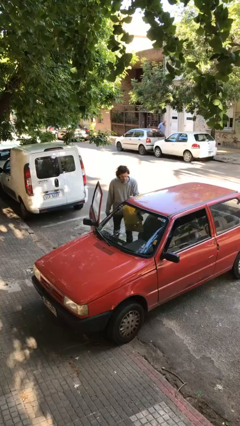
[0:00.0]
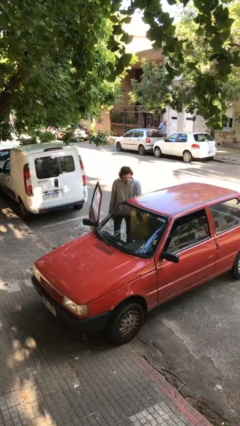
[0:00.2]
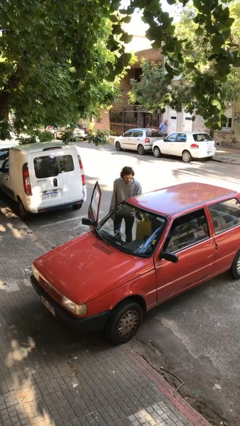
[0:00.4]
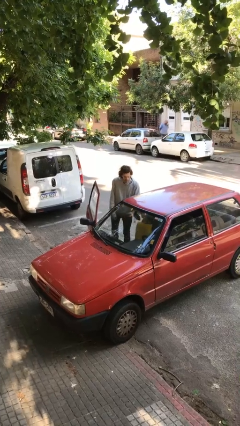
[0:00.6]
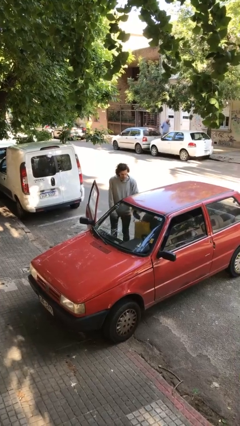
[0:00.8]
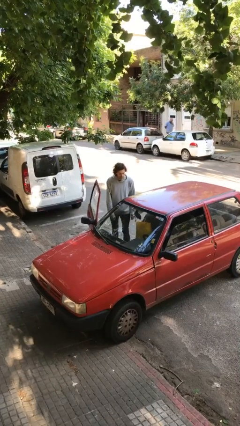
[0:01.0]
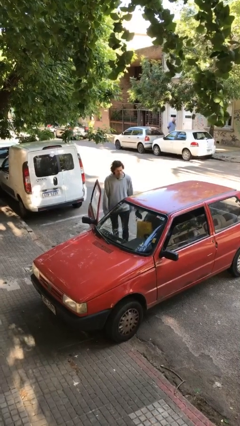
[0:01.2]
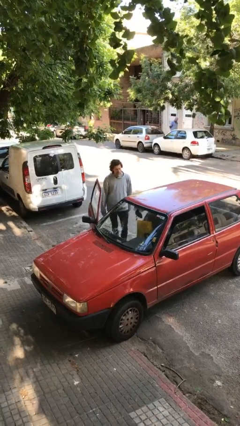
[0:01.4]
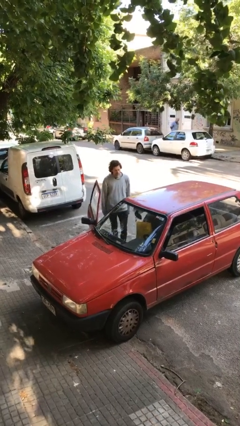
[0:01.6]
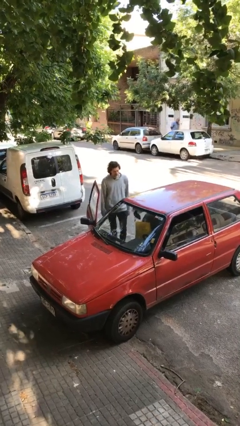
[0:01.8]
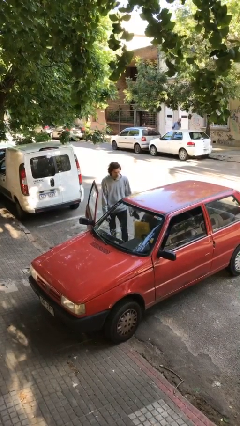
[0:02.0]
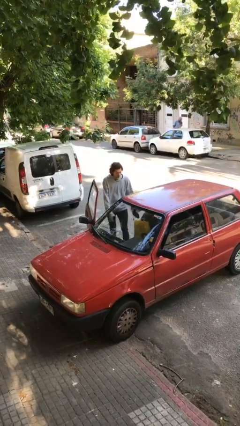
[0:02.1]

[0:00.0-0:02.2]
person loads car

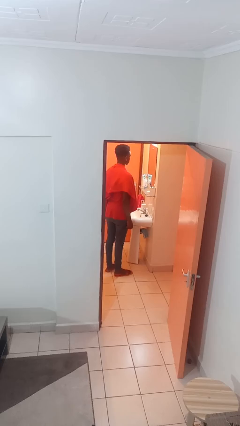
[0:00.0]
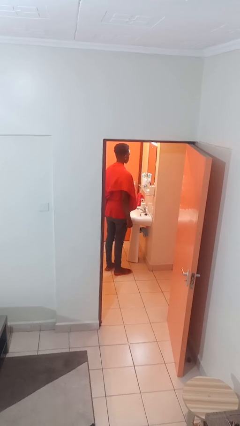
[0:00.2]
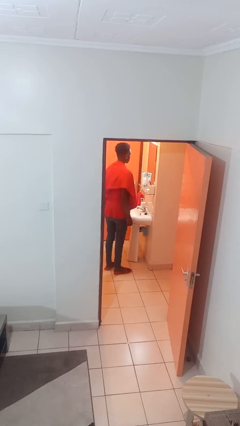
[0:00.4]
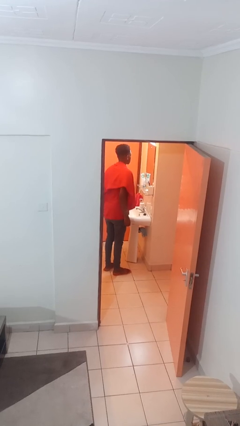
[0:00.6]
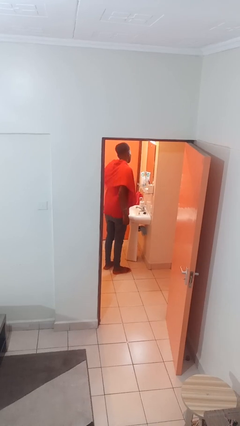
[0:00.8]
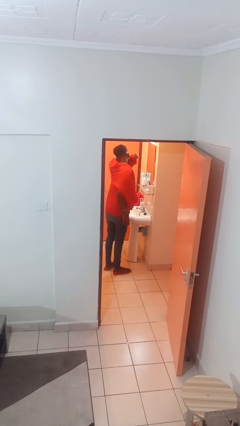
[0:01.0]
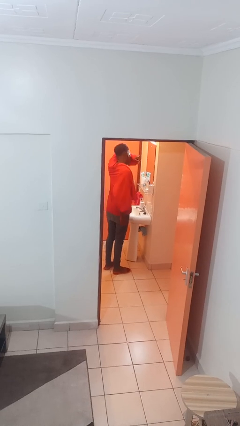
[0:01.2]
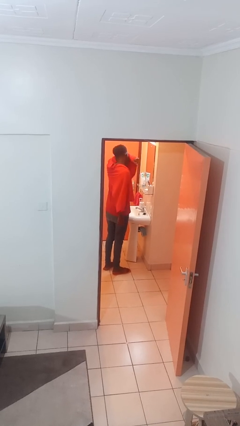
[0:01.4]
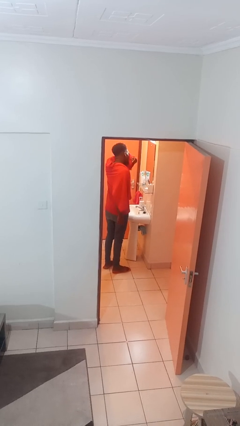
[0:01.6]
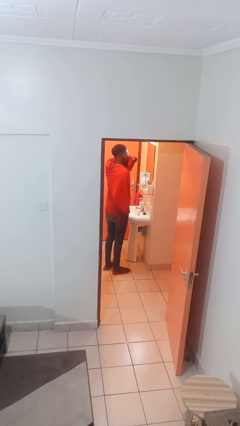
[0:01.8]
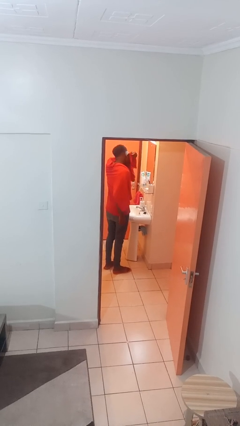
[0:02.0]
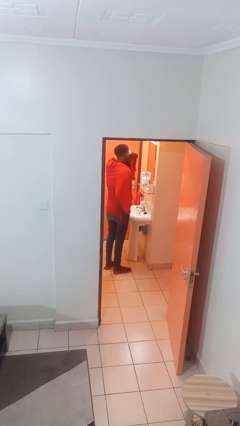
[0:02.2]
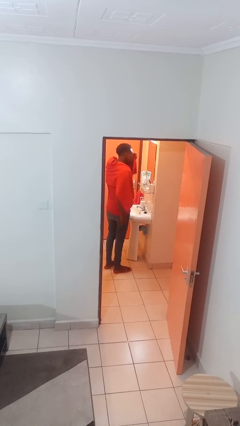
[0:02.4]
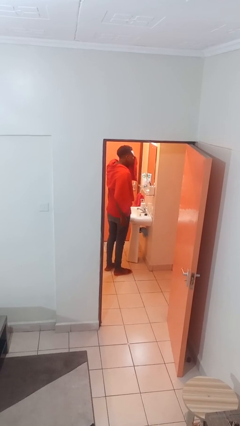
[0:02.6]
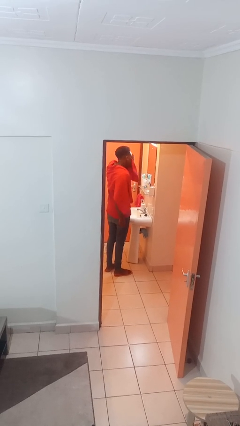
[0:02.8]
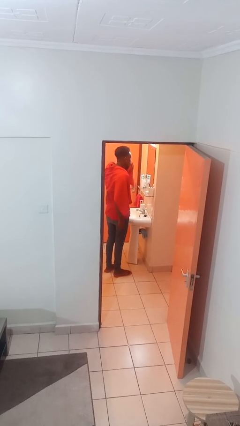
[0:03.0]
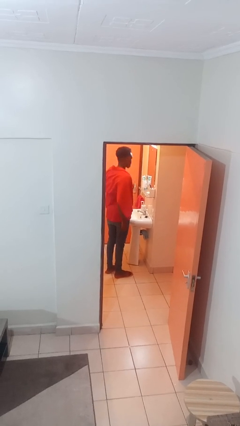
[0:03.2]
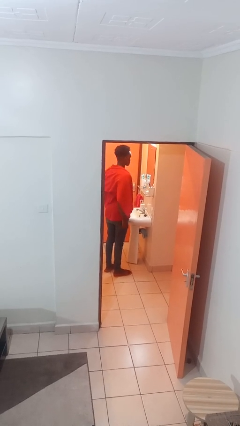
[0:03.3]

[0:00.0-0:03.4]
person dries face with towel

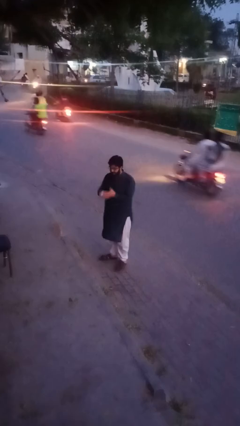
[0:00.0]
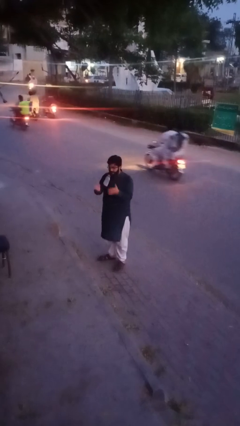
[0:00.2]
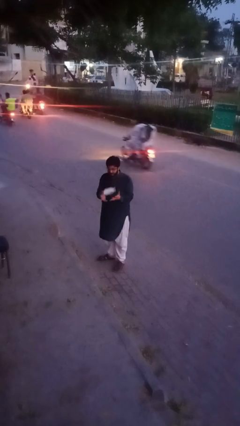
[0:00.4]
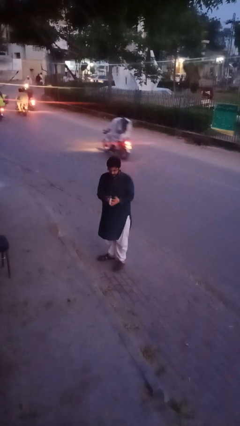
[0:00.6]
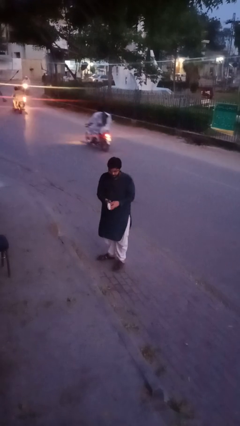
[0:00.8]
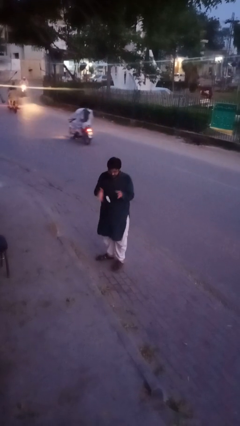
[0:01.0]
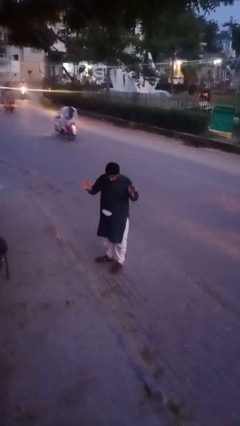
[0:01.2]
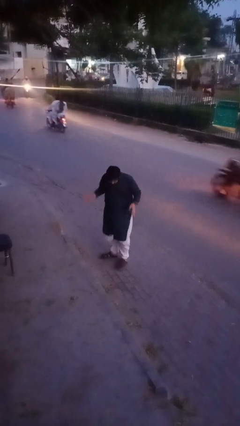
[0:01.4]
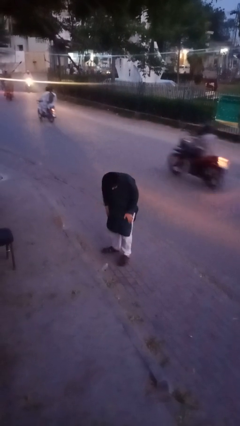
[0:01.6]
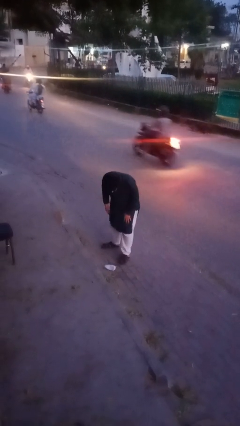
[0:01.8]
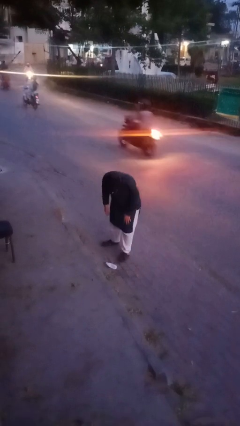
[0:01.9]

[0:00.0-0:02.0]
person drops object

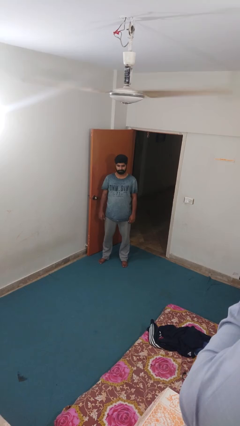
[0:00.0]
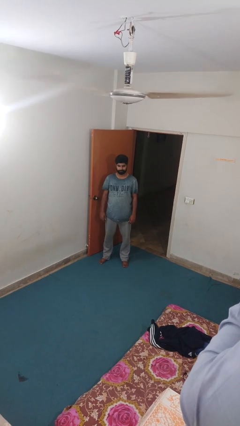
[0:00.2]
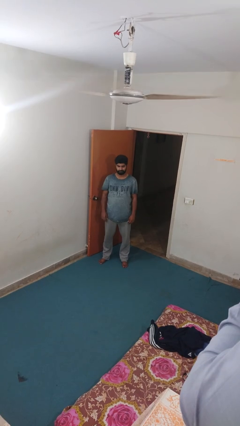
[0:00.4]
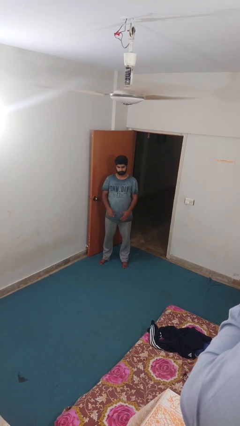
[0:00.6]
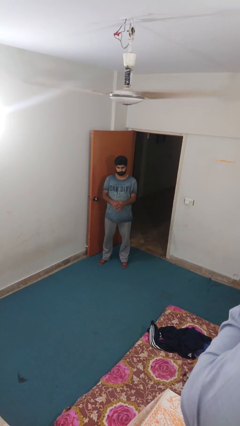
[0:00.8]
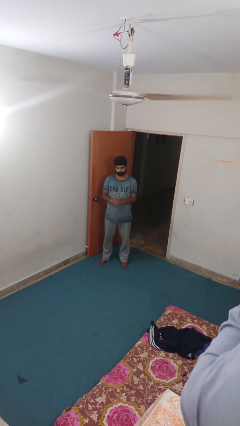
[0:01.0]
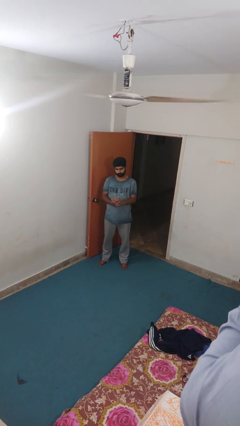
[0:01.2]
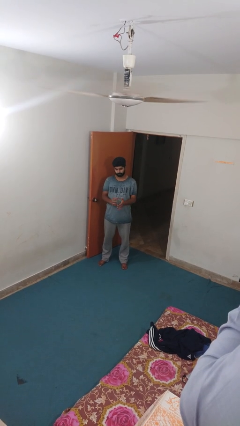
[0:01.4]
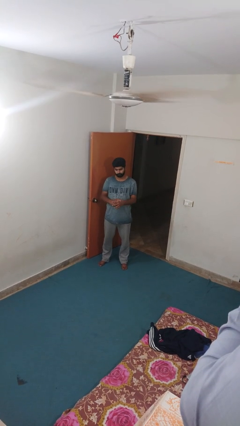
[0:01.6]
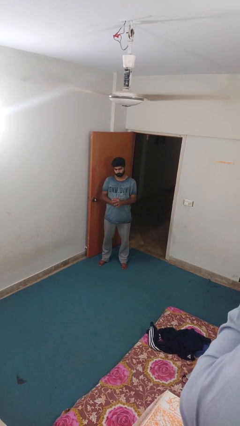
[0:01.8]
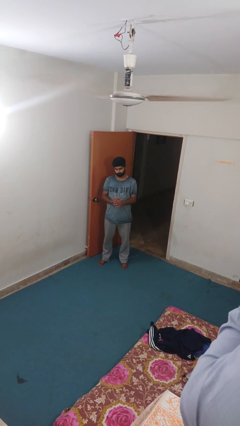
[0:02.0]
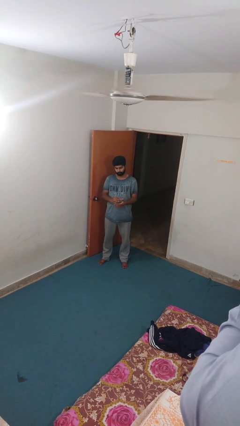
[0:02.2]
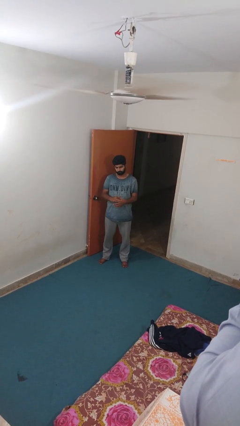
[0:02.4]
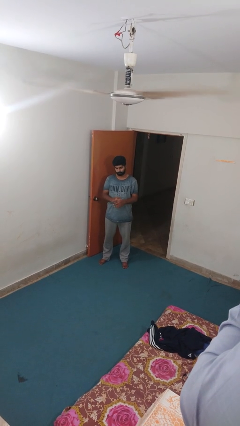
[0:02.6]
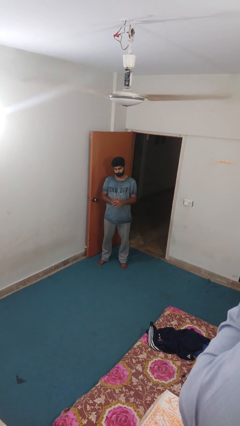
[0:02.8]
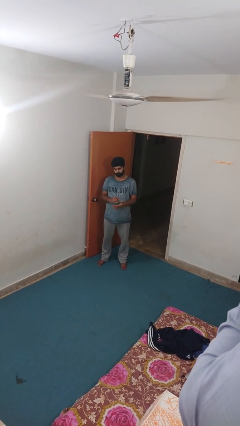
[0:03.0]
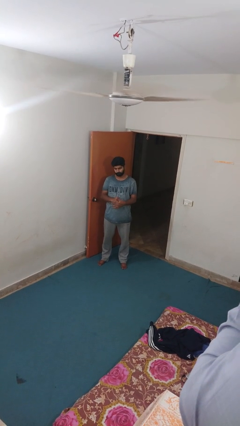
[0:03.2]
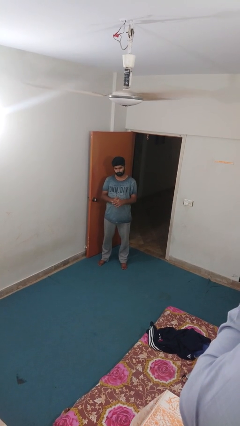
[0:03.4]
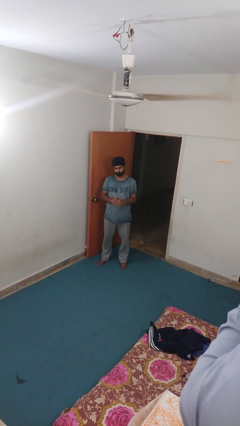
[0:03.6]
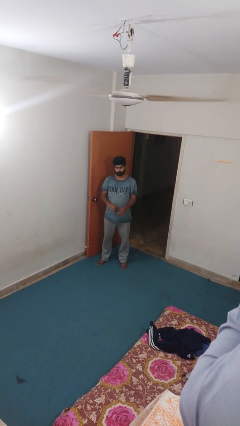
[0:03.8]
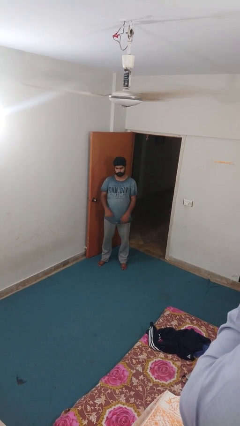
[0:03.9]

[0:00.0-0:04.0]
person snaps fingers

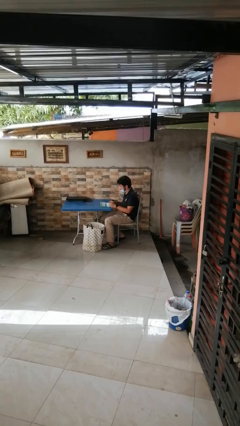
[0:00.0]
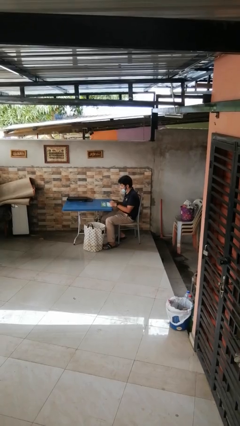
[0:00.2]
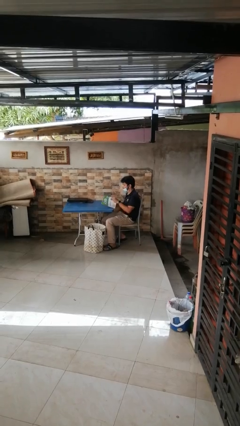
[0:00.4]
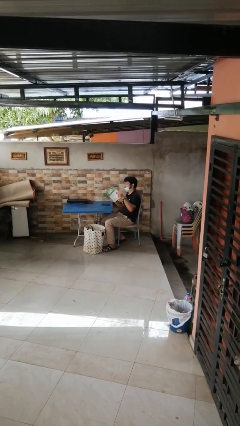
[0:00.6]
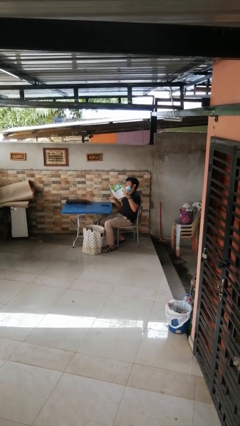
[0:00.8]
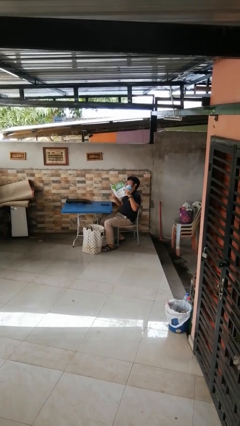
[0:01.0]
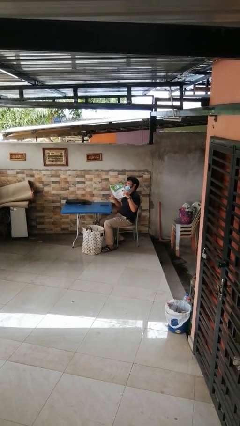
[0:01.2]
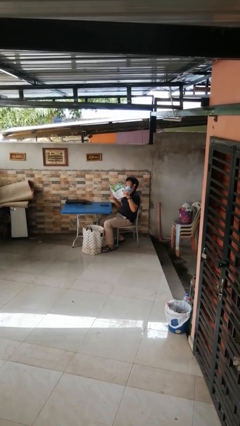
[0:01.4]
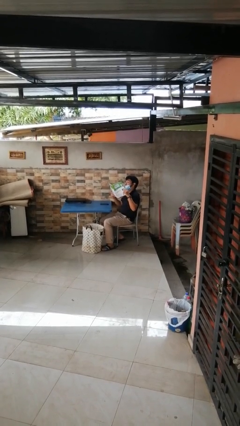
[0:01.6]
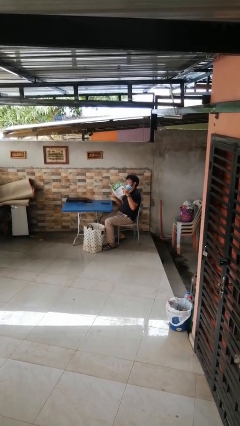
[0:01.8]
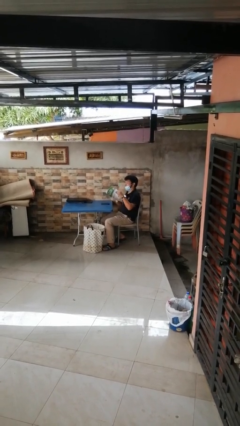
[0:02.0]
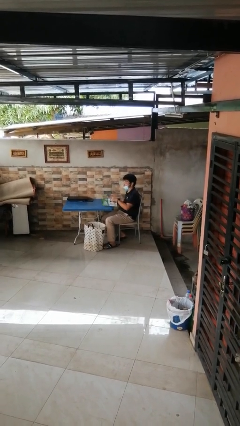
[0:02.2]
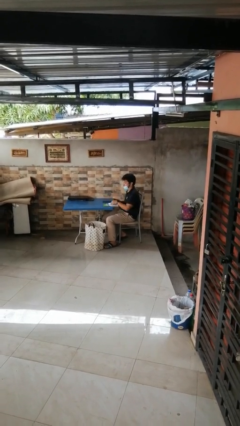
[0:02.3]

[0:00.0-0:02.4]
person reads magazine

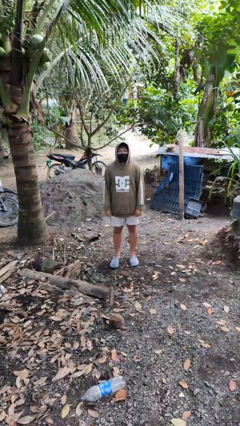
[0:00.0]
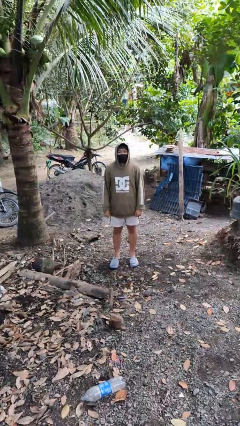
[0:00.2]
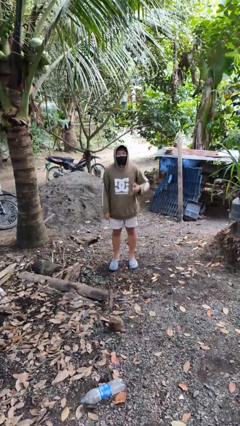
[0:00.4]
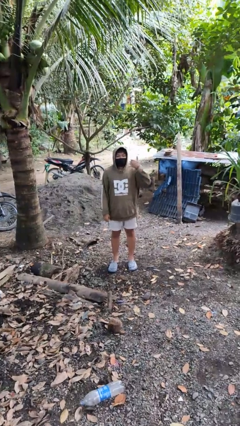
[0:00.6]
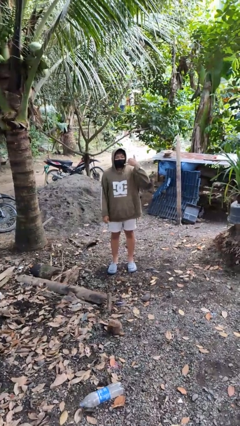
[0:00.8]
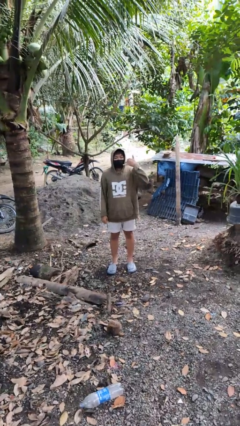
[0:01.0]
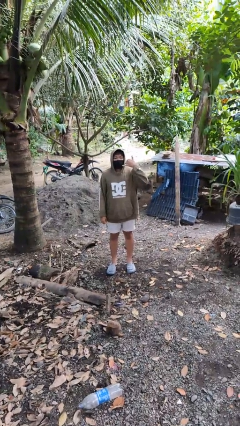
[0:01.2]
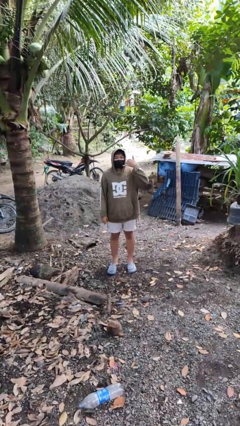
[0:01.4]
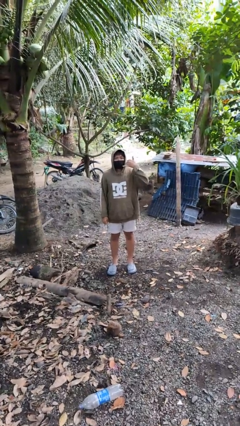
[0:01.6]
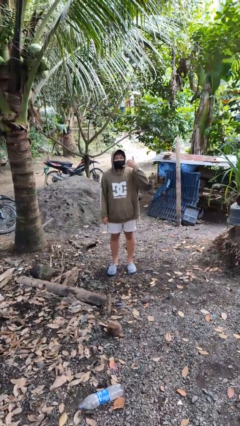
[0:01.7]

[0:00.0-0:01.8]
person gestures call me

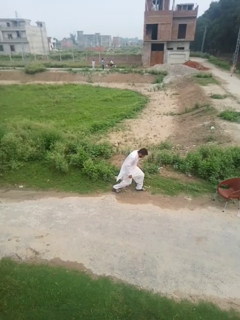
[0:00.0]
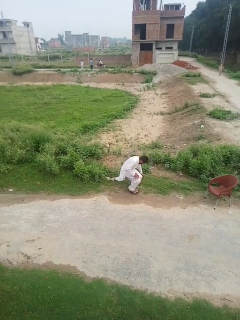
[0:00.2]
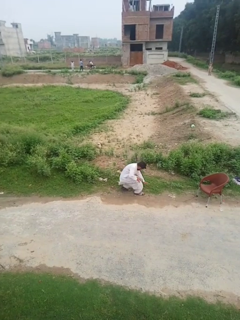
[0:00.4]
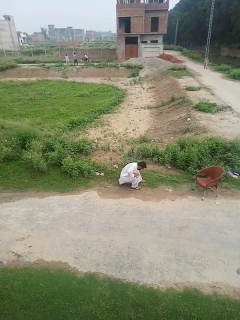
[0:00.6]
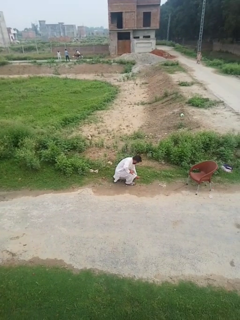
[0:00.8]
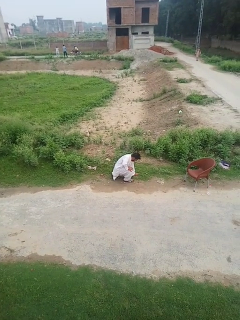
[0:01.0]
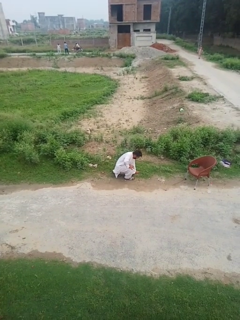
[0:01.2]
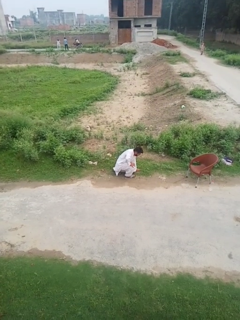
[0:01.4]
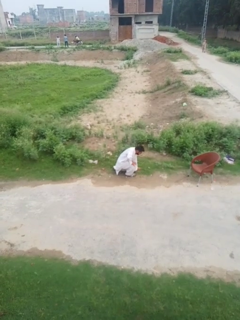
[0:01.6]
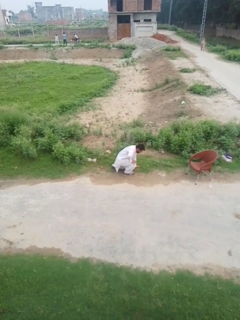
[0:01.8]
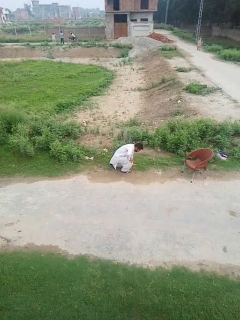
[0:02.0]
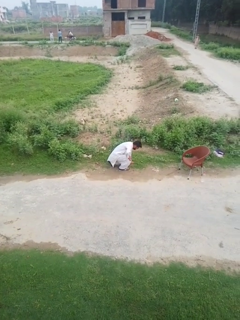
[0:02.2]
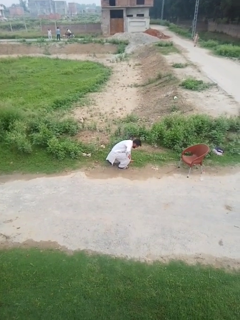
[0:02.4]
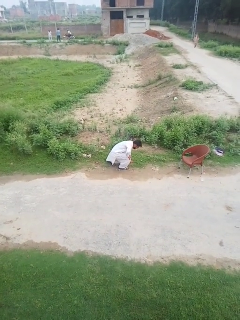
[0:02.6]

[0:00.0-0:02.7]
person lies down on floor
